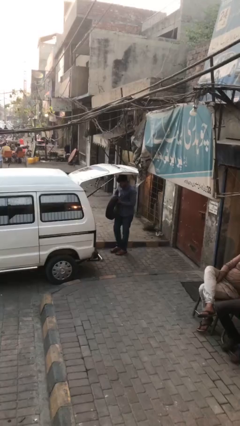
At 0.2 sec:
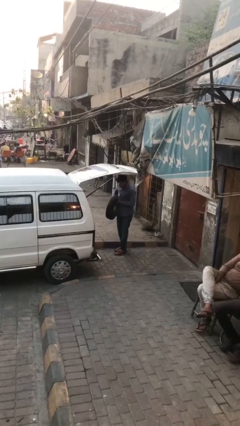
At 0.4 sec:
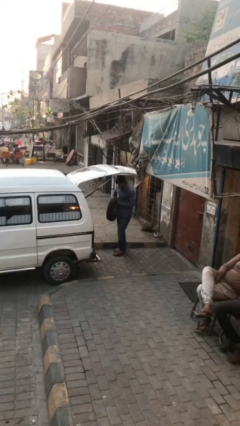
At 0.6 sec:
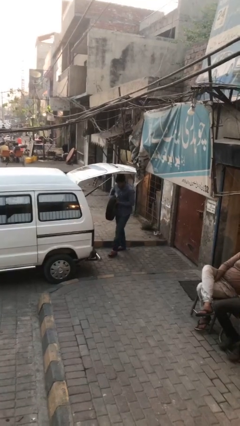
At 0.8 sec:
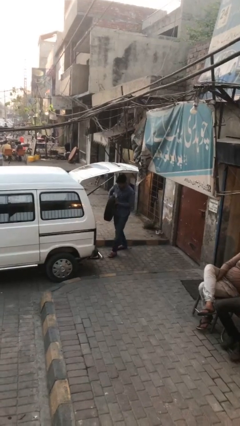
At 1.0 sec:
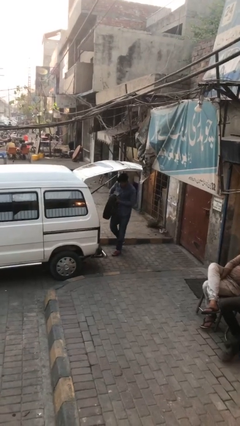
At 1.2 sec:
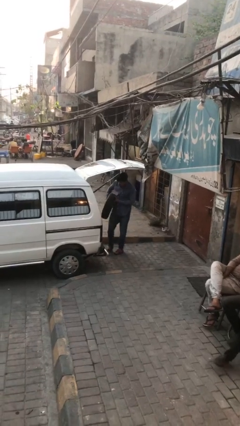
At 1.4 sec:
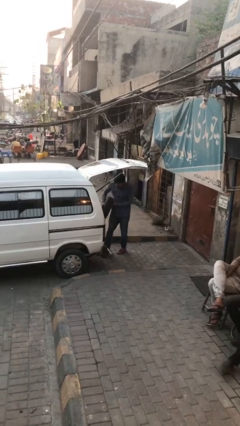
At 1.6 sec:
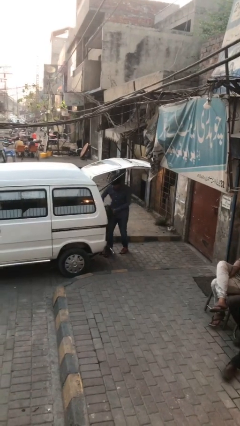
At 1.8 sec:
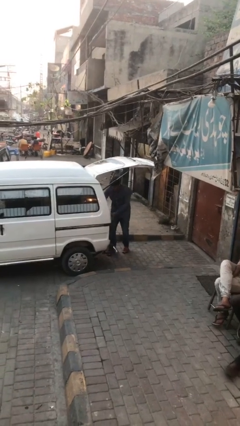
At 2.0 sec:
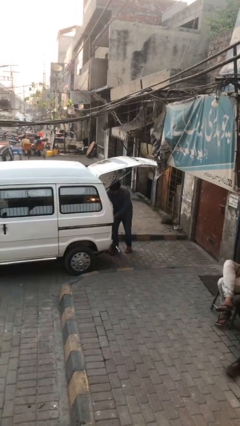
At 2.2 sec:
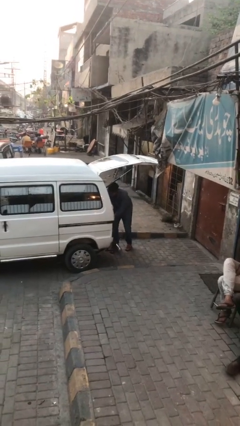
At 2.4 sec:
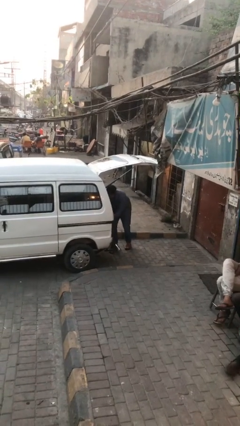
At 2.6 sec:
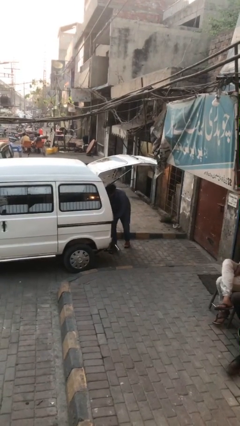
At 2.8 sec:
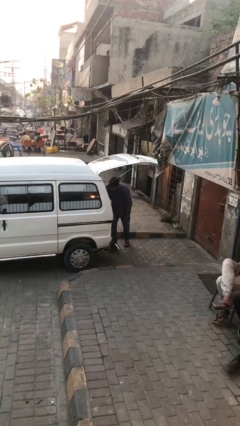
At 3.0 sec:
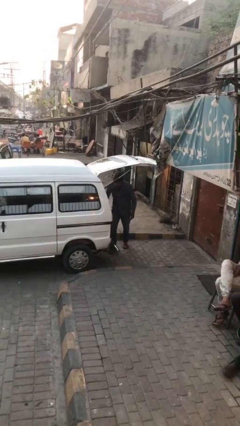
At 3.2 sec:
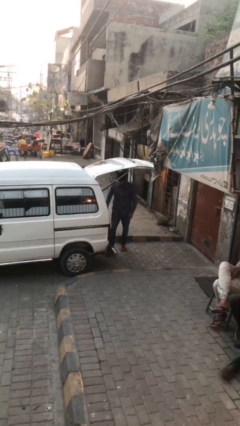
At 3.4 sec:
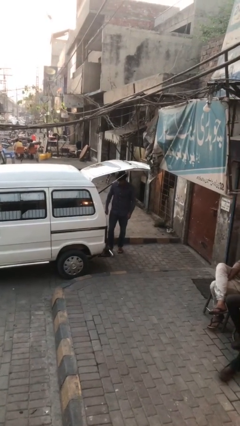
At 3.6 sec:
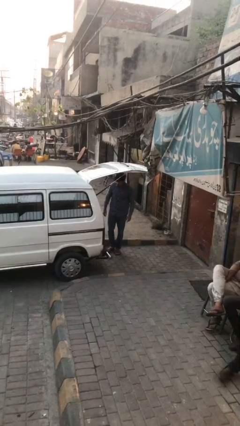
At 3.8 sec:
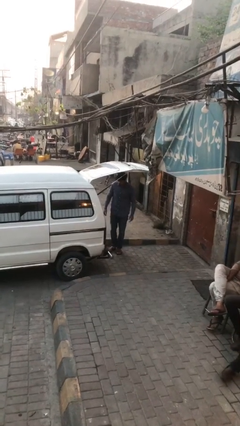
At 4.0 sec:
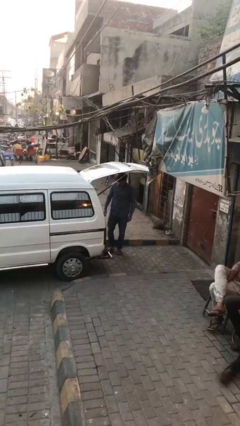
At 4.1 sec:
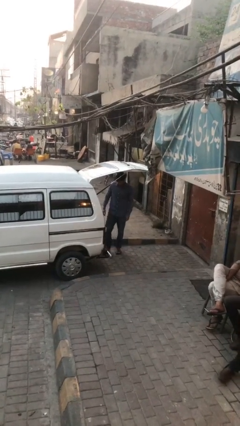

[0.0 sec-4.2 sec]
person loads car

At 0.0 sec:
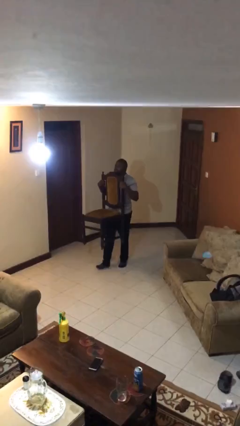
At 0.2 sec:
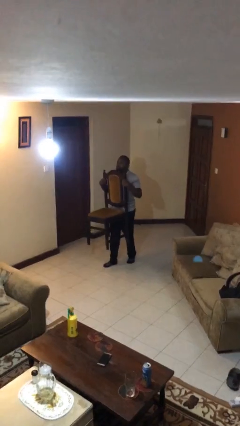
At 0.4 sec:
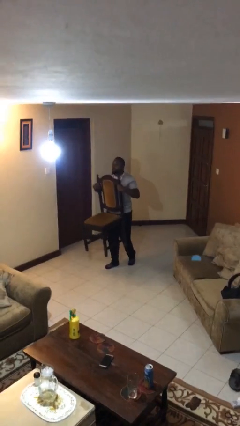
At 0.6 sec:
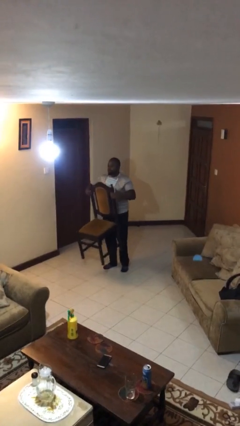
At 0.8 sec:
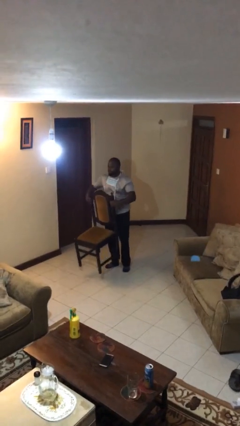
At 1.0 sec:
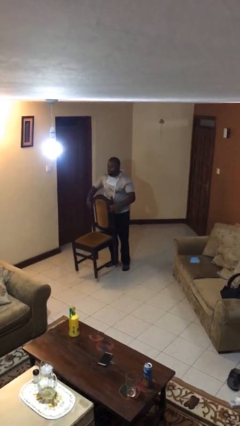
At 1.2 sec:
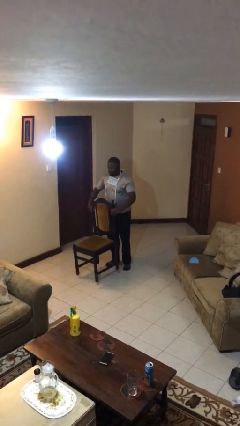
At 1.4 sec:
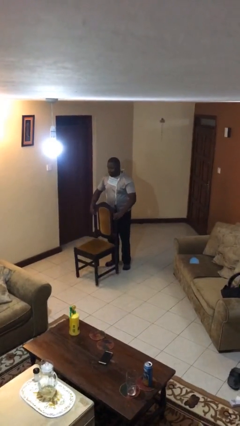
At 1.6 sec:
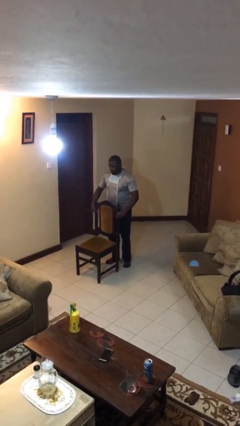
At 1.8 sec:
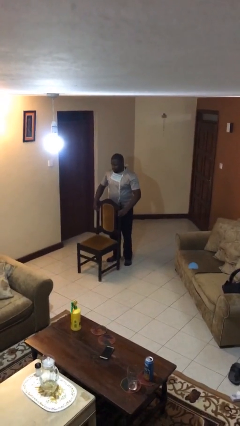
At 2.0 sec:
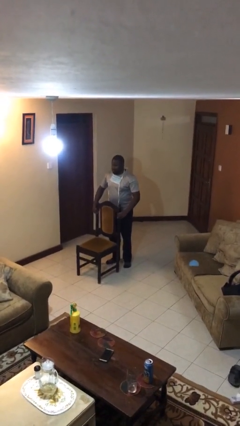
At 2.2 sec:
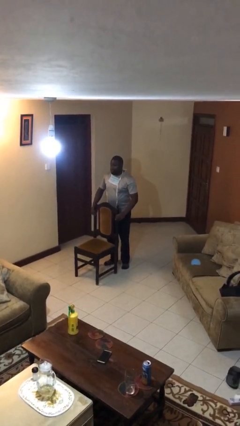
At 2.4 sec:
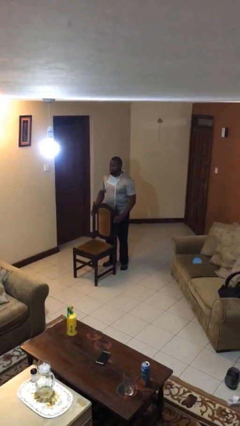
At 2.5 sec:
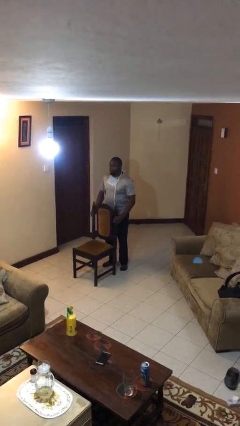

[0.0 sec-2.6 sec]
person puts down object on floor

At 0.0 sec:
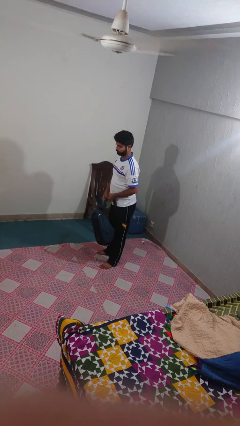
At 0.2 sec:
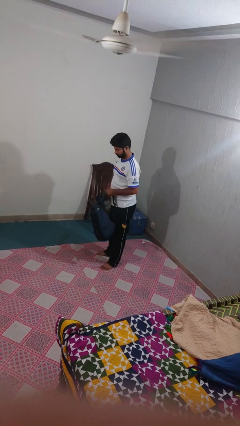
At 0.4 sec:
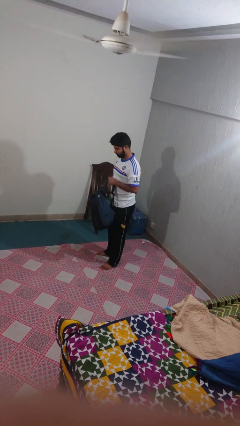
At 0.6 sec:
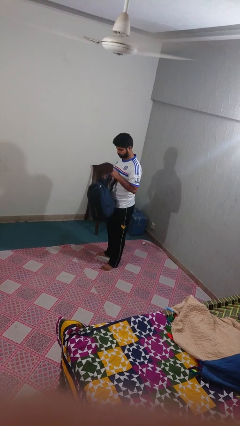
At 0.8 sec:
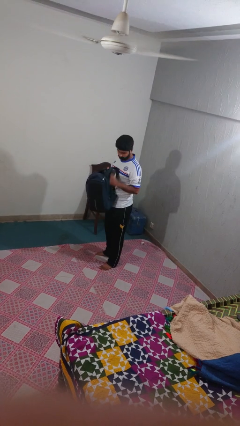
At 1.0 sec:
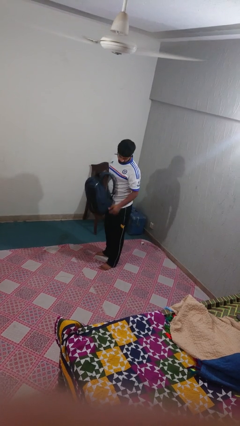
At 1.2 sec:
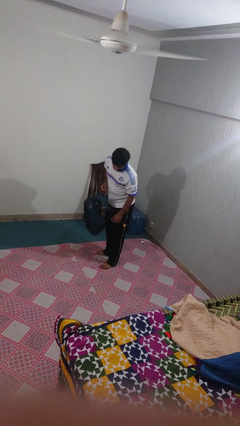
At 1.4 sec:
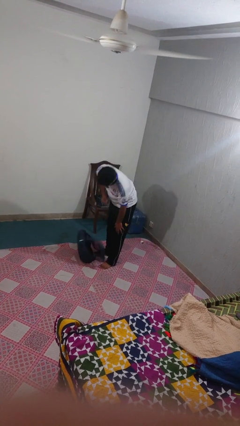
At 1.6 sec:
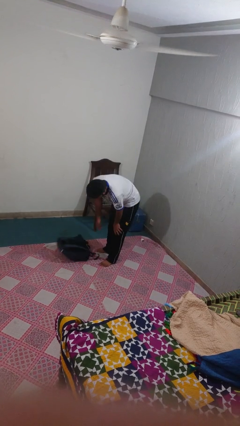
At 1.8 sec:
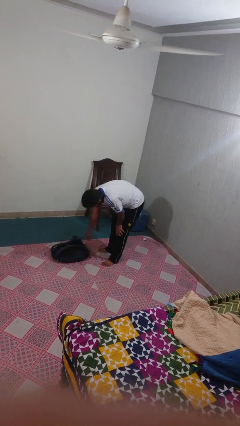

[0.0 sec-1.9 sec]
person drops object

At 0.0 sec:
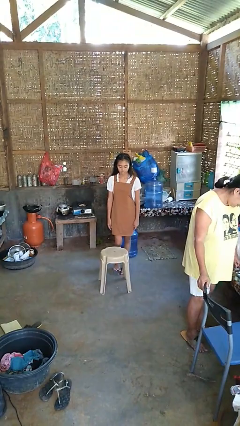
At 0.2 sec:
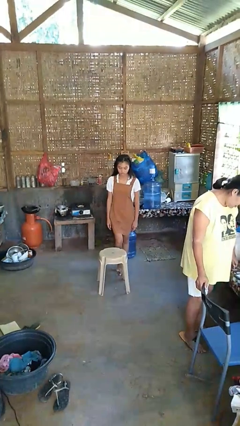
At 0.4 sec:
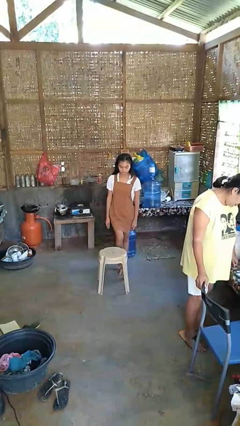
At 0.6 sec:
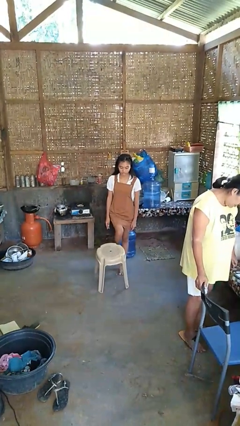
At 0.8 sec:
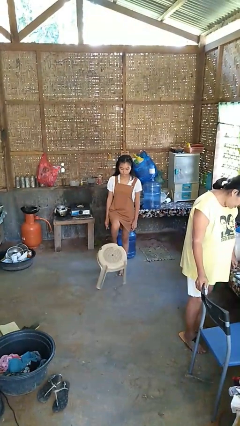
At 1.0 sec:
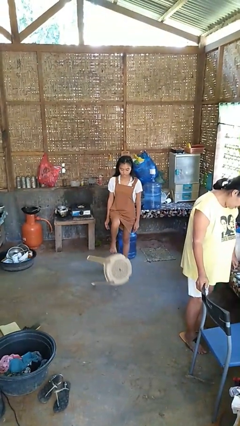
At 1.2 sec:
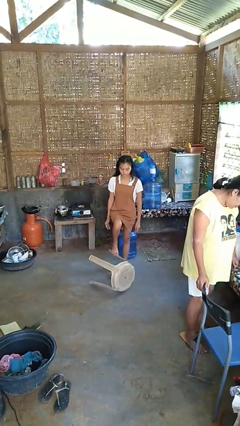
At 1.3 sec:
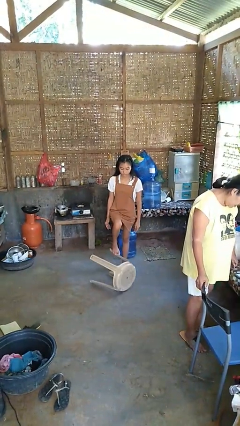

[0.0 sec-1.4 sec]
person knocks over furniture

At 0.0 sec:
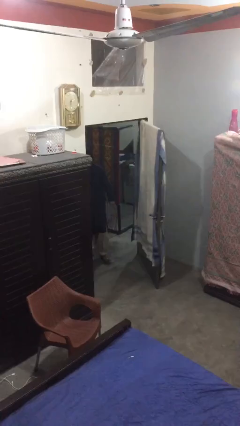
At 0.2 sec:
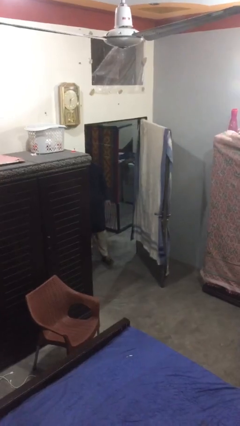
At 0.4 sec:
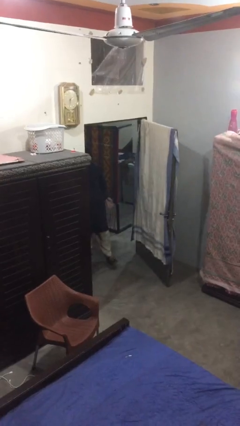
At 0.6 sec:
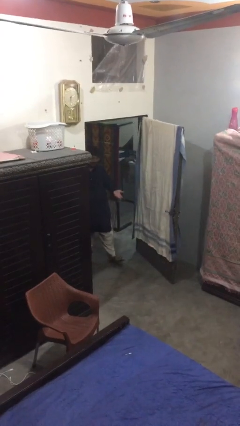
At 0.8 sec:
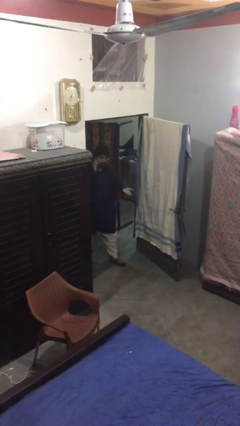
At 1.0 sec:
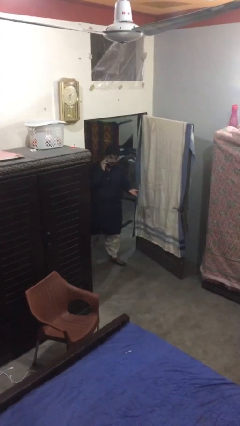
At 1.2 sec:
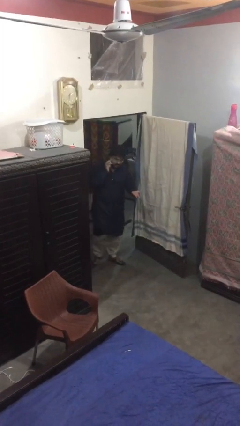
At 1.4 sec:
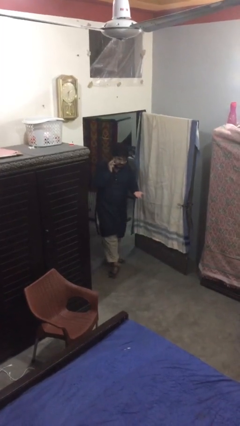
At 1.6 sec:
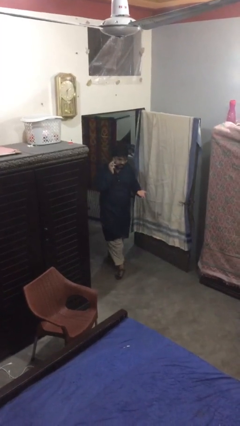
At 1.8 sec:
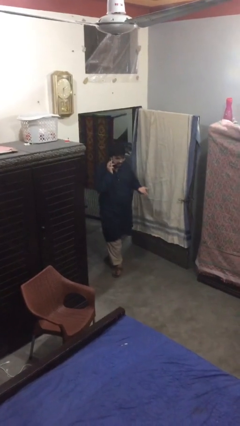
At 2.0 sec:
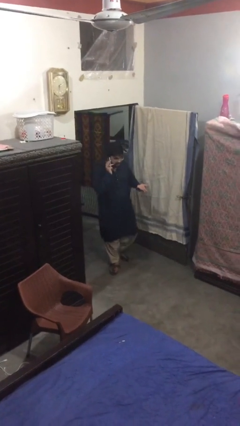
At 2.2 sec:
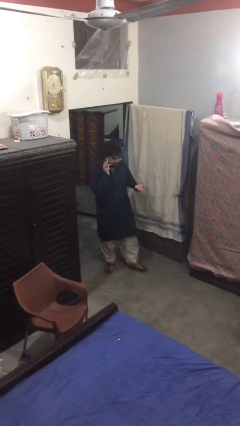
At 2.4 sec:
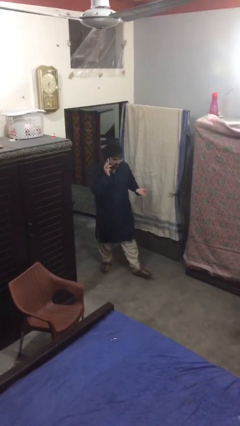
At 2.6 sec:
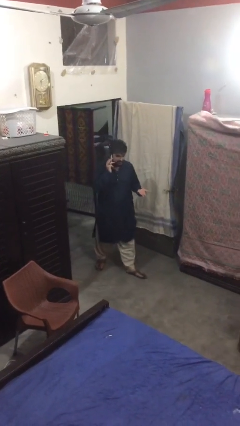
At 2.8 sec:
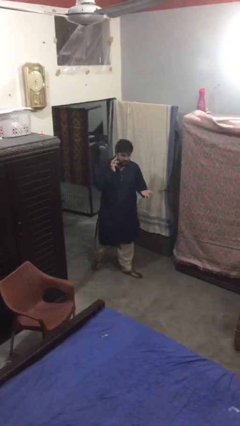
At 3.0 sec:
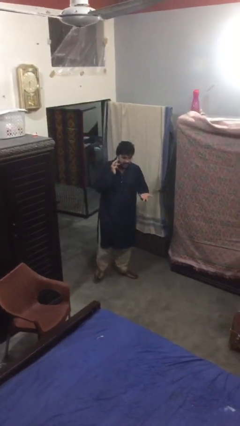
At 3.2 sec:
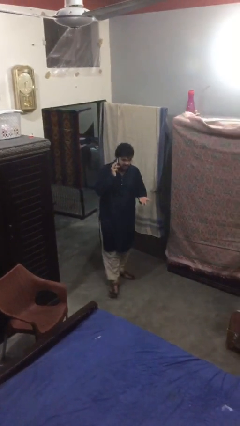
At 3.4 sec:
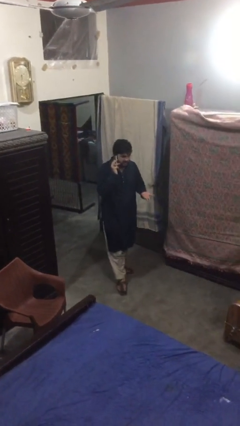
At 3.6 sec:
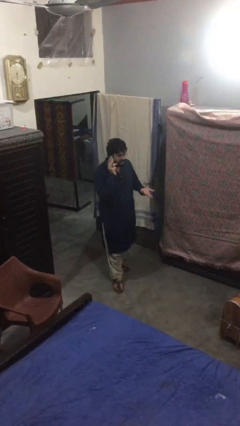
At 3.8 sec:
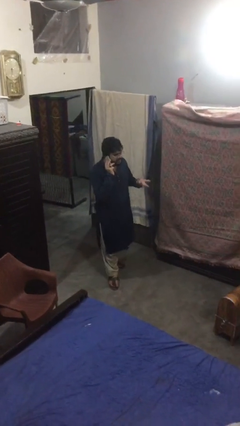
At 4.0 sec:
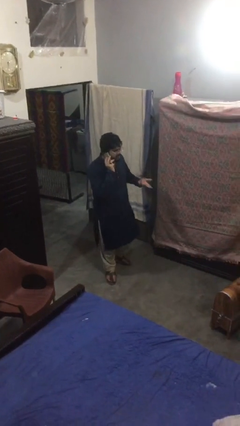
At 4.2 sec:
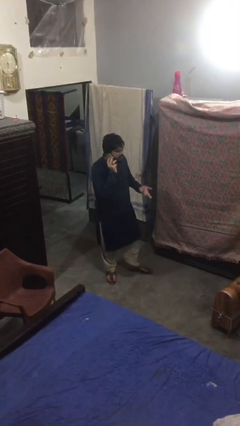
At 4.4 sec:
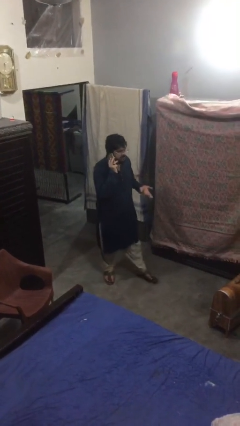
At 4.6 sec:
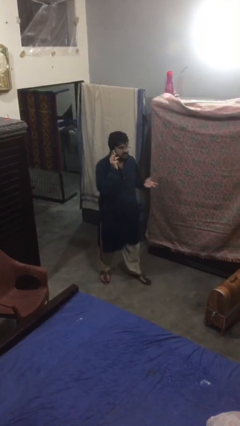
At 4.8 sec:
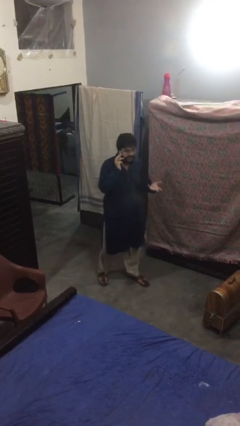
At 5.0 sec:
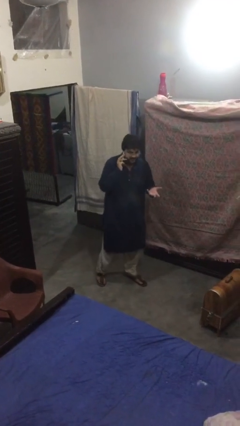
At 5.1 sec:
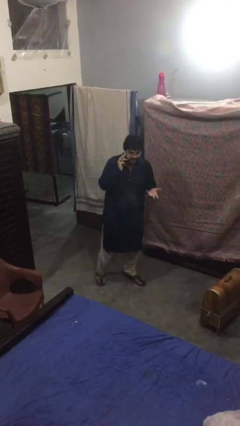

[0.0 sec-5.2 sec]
person enters scene through structure

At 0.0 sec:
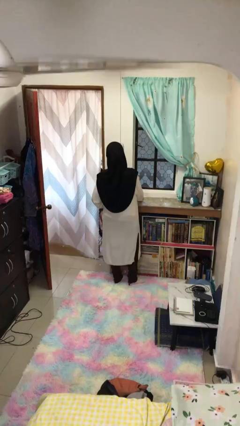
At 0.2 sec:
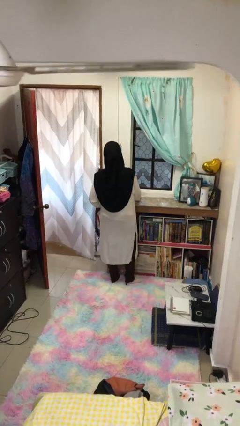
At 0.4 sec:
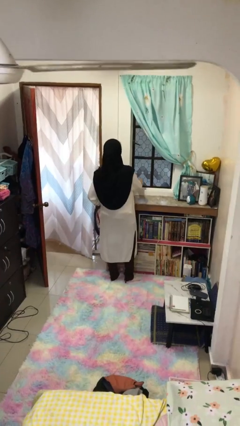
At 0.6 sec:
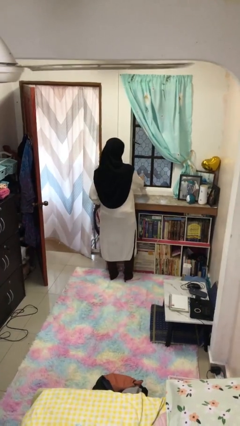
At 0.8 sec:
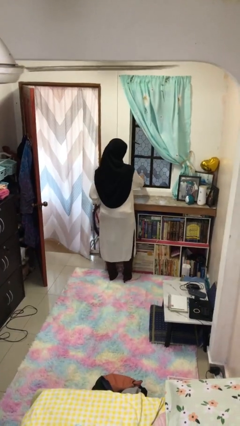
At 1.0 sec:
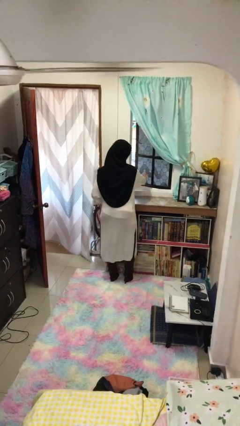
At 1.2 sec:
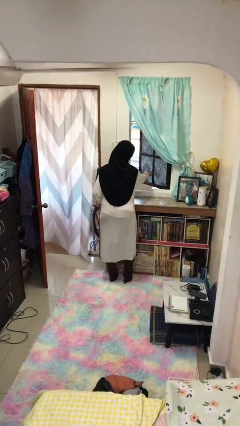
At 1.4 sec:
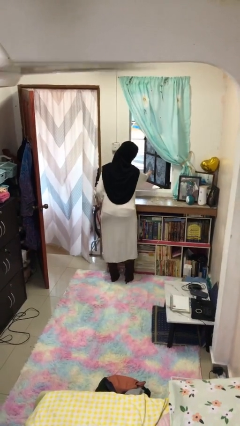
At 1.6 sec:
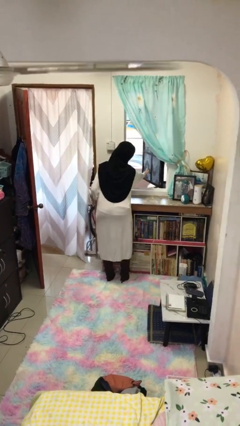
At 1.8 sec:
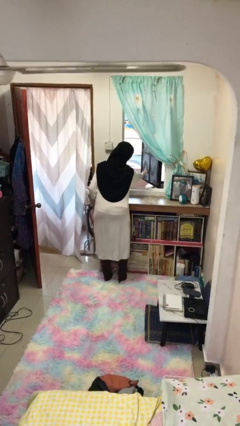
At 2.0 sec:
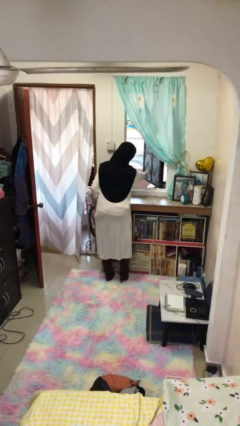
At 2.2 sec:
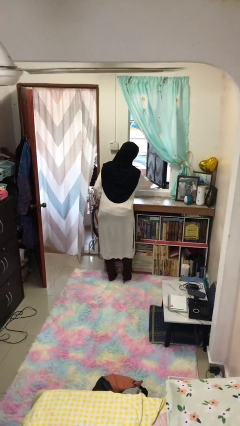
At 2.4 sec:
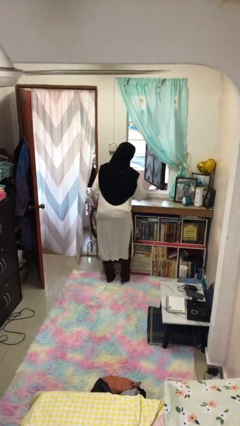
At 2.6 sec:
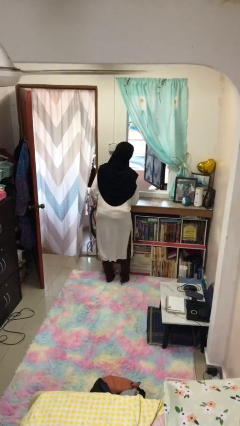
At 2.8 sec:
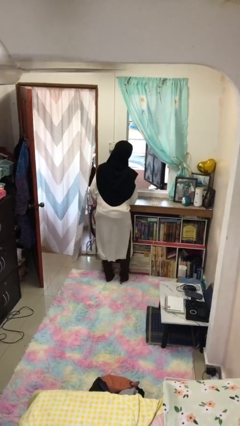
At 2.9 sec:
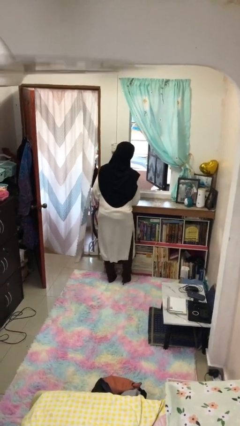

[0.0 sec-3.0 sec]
person opens home window
